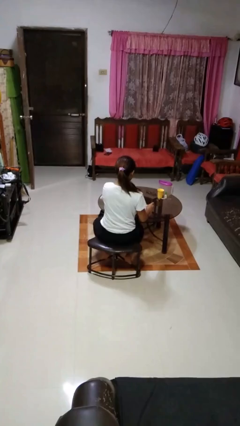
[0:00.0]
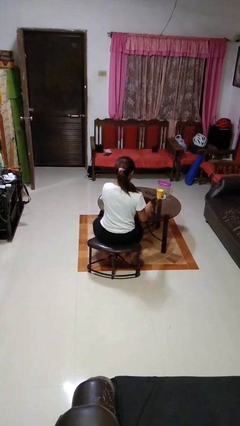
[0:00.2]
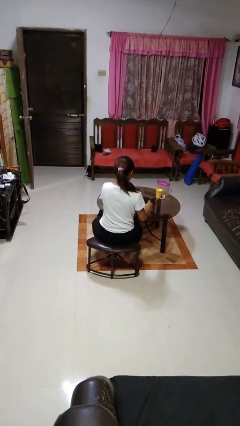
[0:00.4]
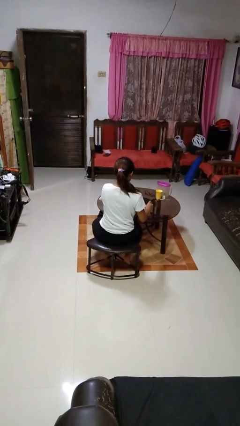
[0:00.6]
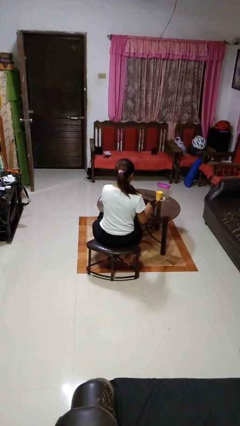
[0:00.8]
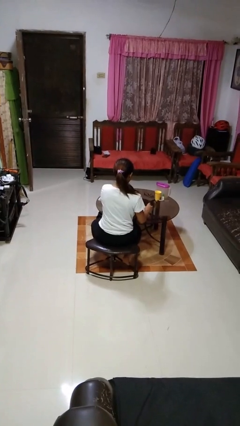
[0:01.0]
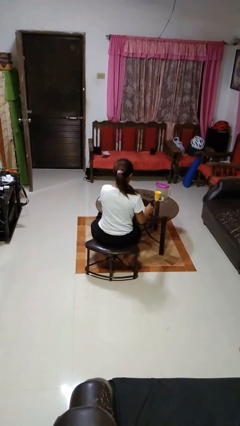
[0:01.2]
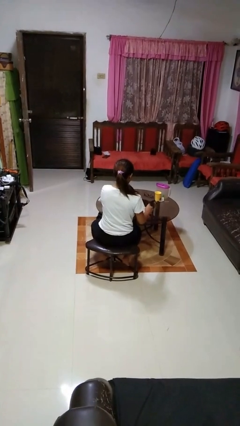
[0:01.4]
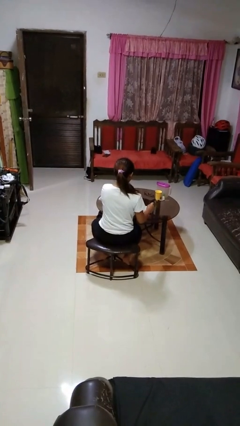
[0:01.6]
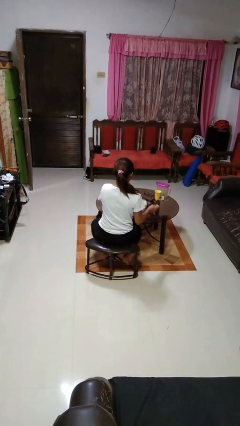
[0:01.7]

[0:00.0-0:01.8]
person stirs mug

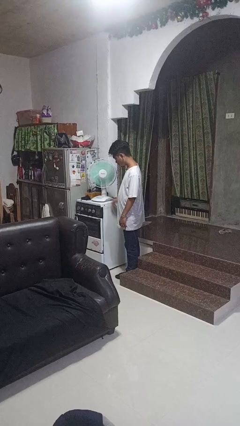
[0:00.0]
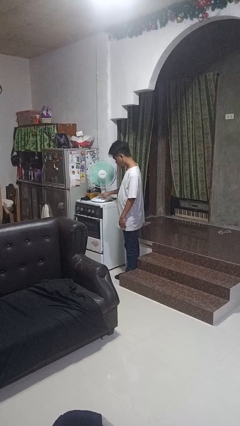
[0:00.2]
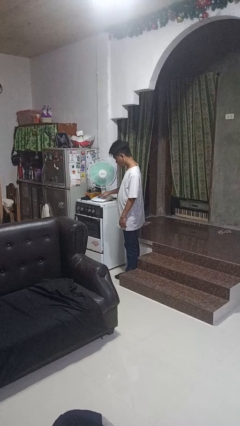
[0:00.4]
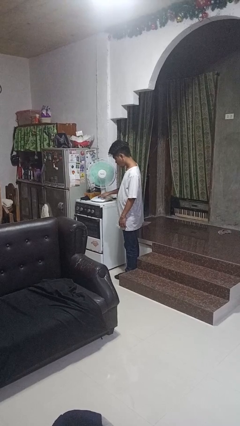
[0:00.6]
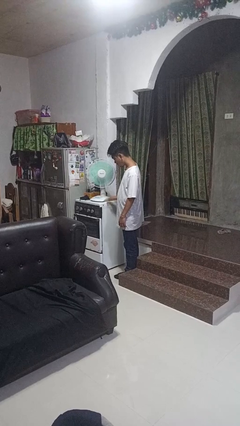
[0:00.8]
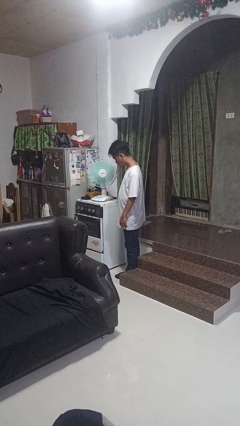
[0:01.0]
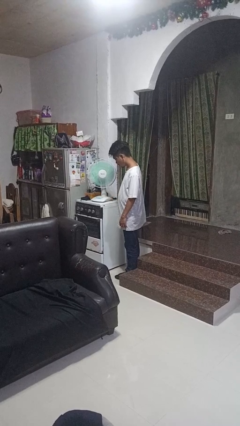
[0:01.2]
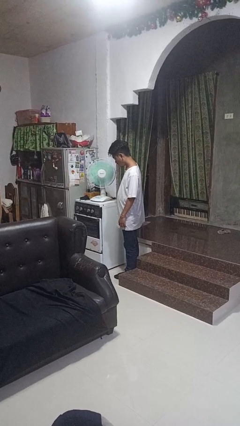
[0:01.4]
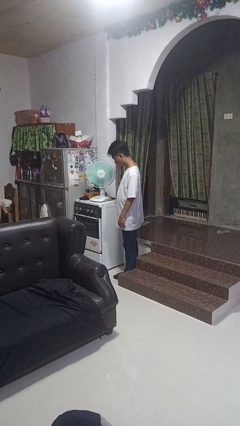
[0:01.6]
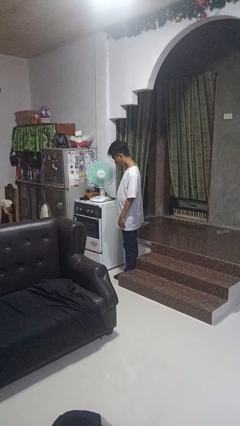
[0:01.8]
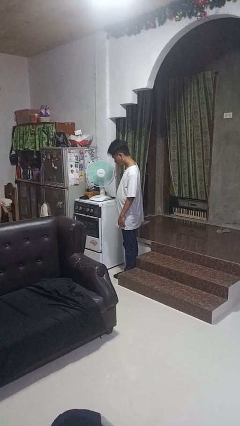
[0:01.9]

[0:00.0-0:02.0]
person turns on fan

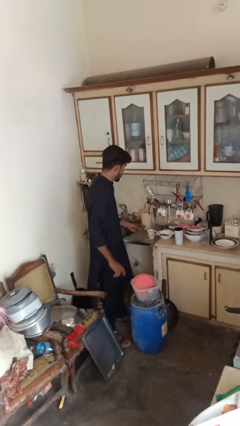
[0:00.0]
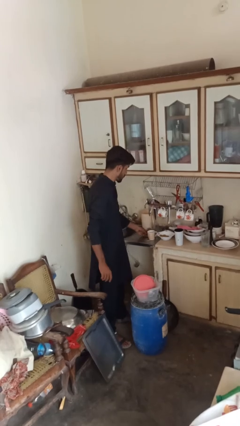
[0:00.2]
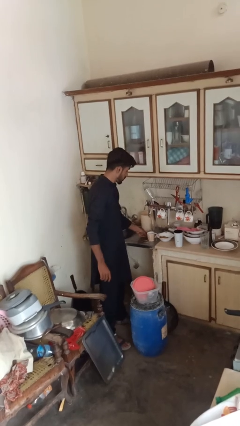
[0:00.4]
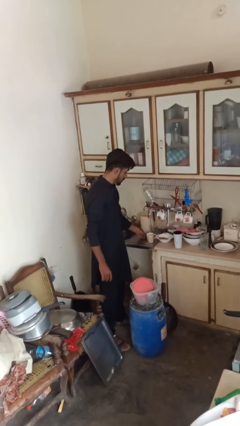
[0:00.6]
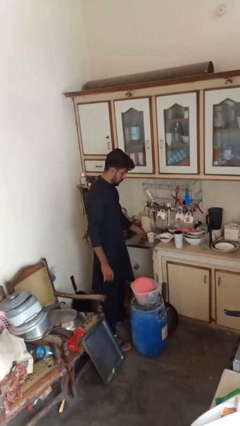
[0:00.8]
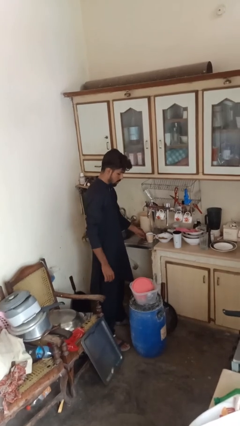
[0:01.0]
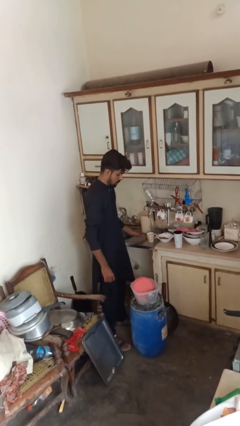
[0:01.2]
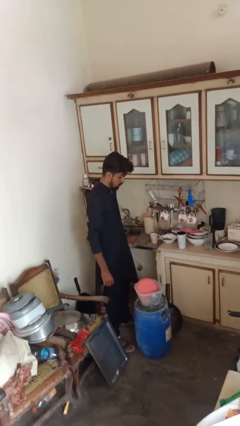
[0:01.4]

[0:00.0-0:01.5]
person unloads dishwasher

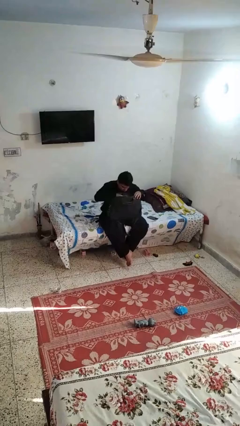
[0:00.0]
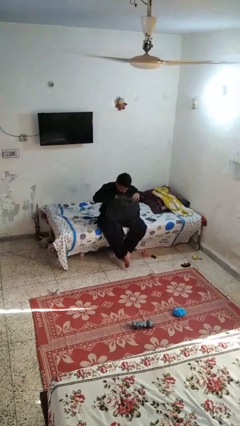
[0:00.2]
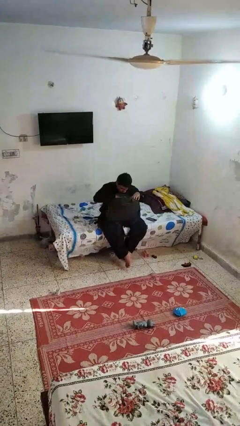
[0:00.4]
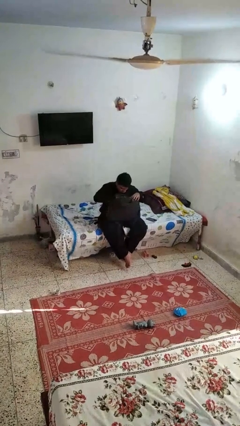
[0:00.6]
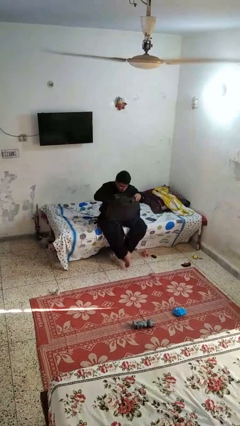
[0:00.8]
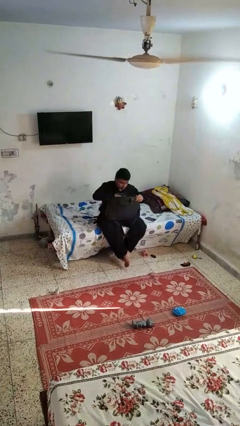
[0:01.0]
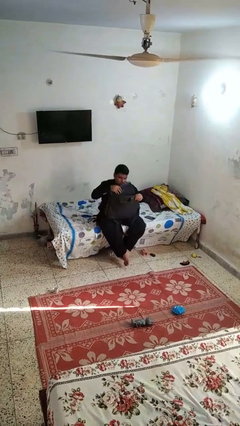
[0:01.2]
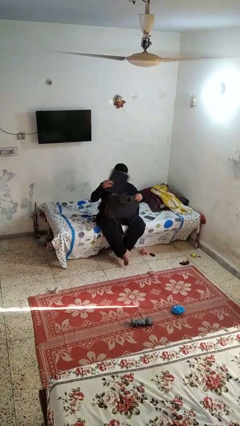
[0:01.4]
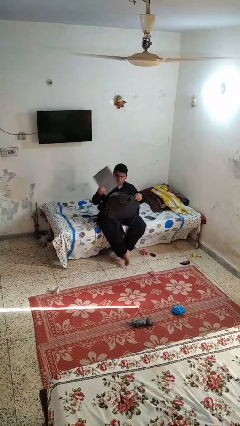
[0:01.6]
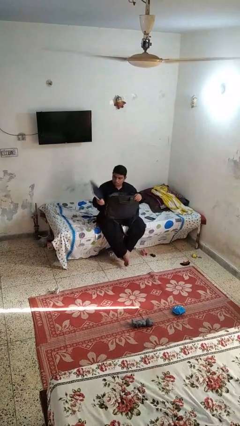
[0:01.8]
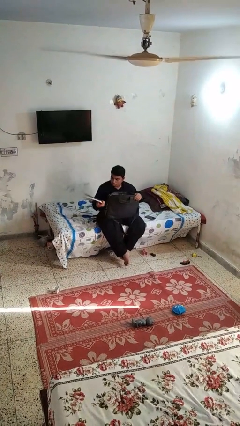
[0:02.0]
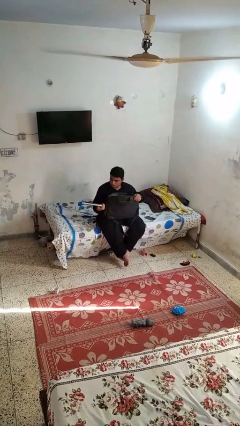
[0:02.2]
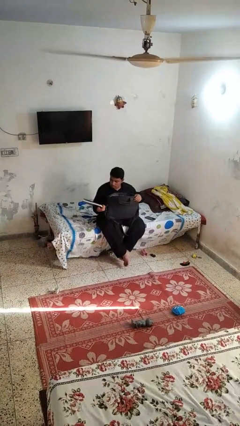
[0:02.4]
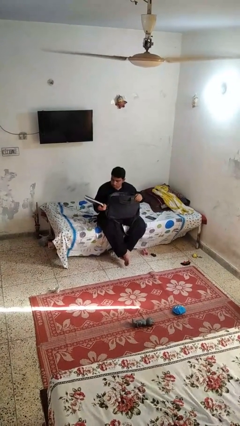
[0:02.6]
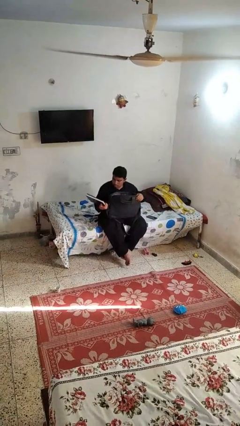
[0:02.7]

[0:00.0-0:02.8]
person takes object from backpack

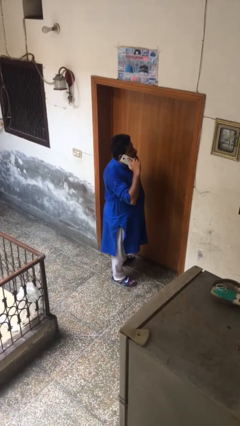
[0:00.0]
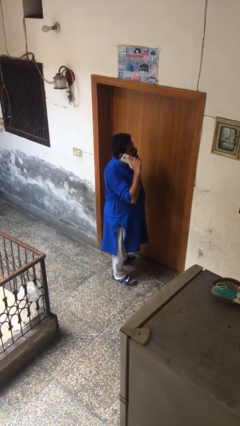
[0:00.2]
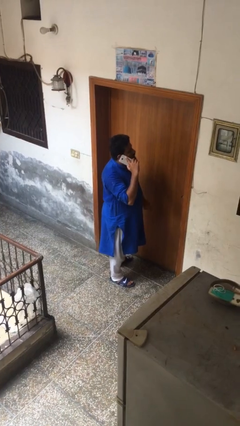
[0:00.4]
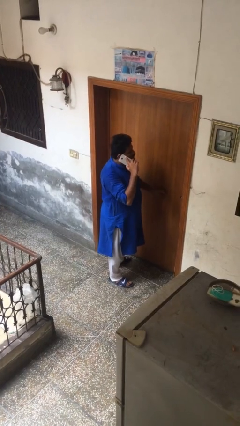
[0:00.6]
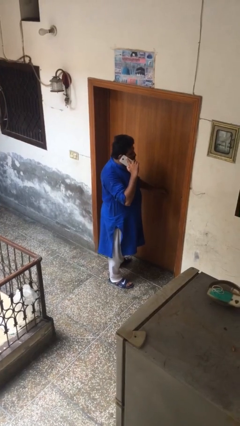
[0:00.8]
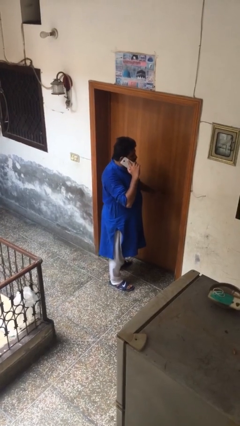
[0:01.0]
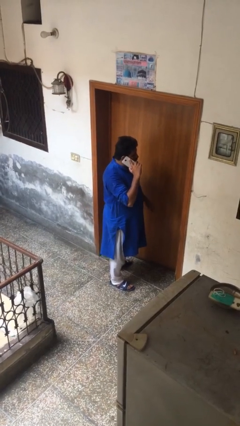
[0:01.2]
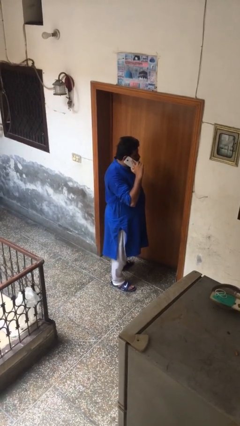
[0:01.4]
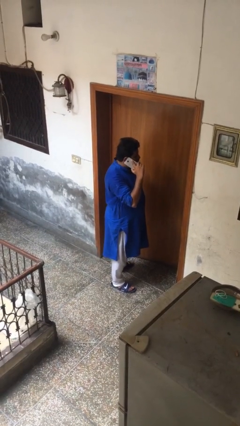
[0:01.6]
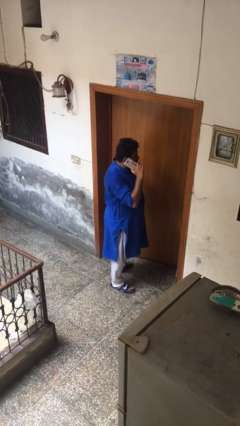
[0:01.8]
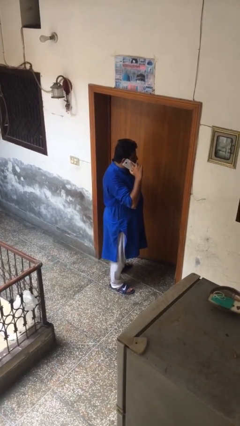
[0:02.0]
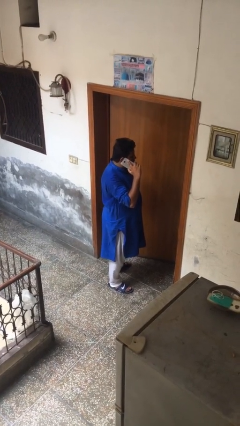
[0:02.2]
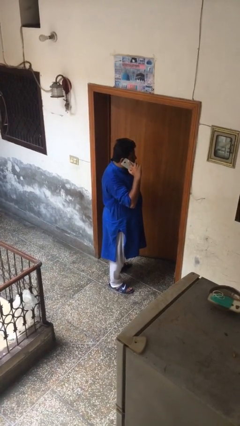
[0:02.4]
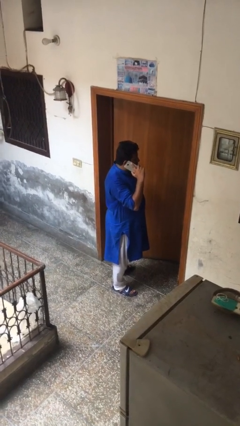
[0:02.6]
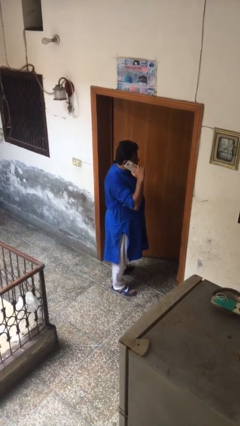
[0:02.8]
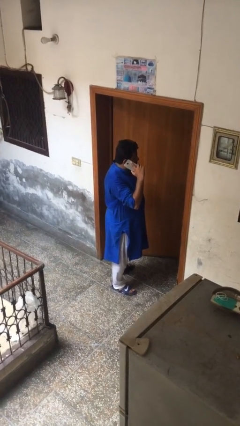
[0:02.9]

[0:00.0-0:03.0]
person opens facility door

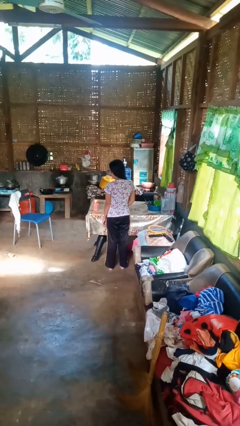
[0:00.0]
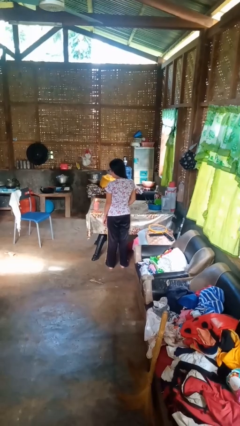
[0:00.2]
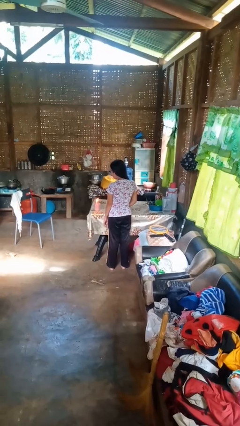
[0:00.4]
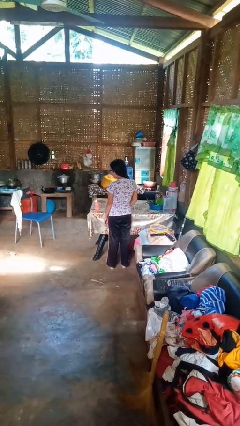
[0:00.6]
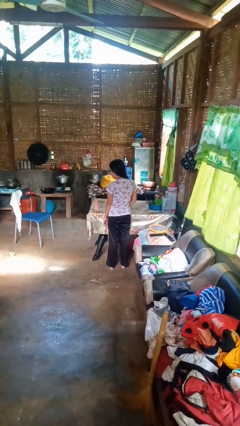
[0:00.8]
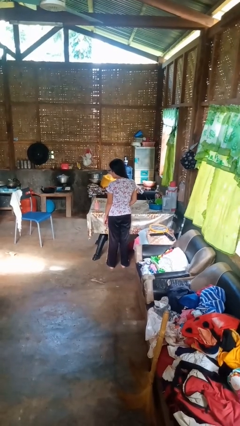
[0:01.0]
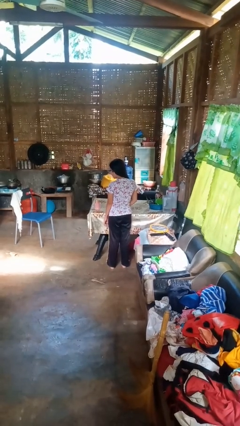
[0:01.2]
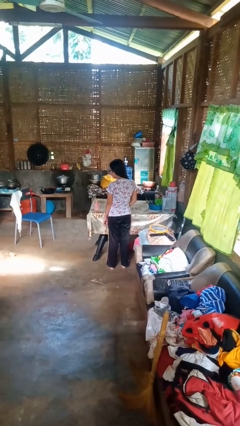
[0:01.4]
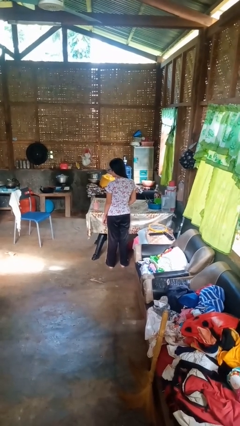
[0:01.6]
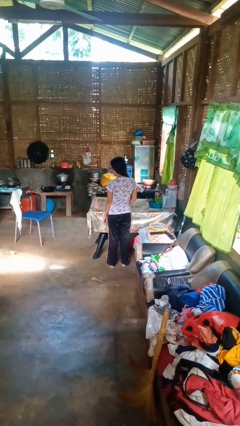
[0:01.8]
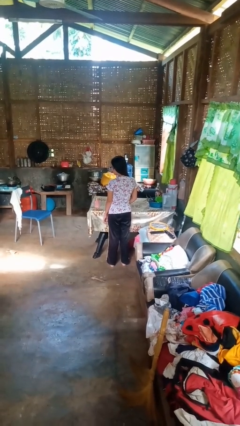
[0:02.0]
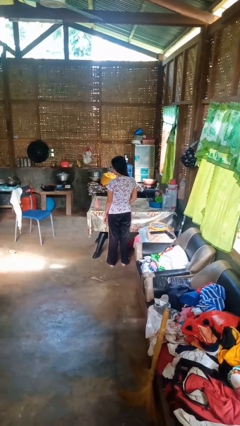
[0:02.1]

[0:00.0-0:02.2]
person extinguishes candle

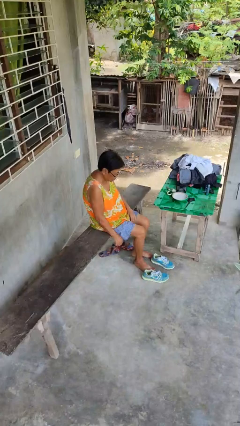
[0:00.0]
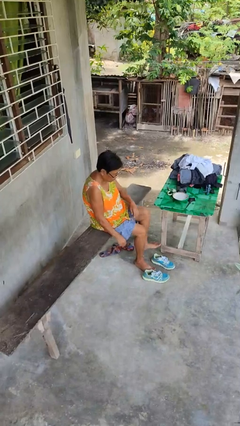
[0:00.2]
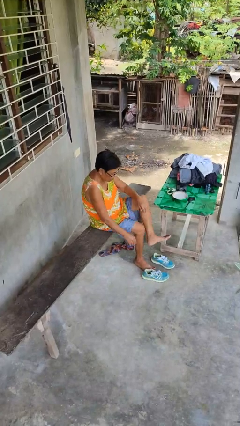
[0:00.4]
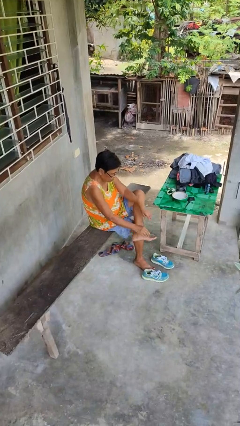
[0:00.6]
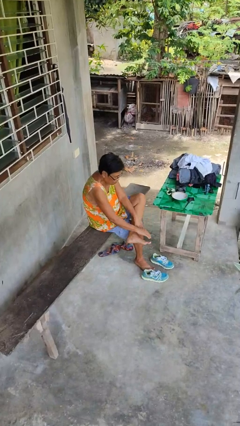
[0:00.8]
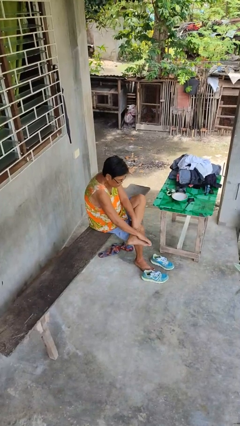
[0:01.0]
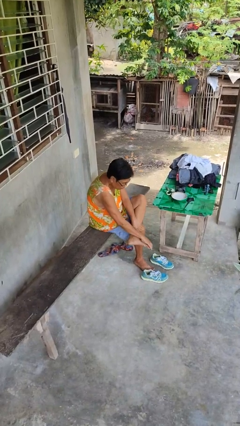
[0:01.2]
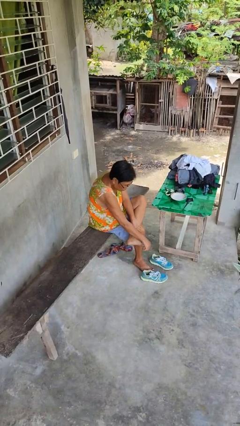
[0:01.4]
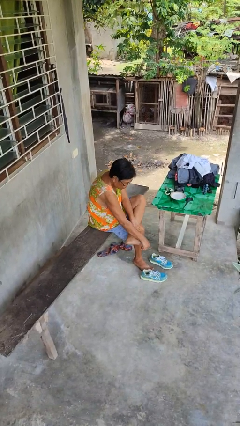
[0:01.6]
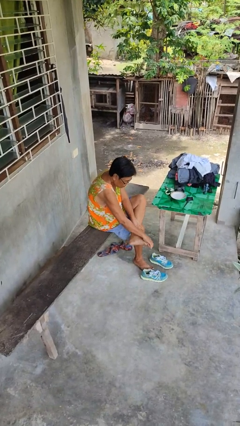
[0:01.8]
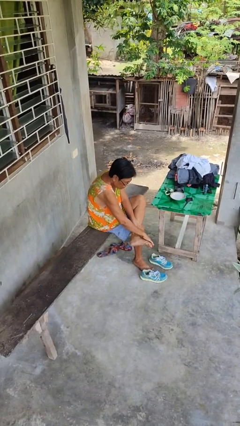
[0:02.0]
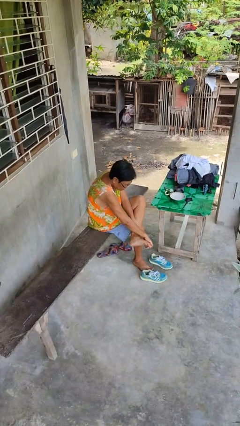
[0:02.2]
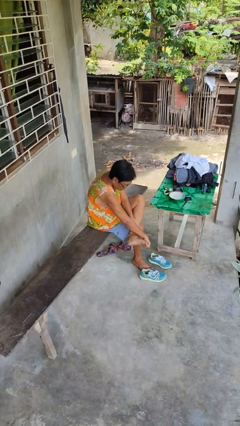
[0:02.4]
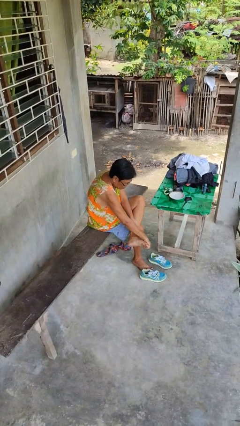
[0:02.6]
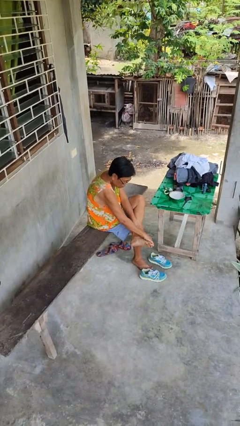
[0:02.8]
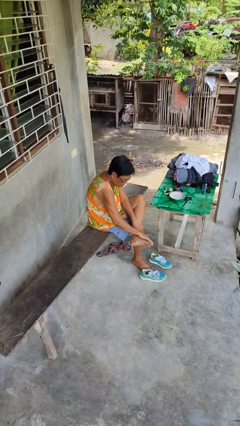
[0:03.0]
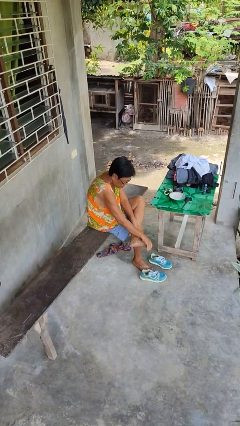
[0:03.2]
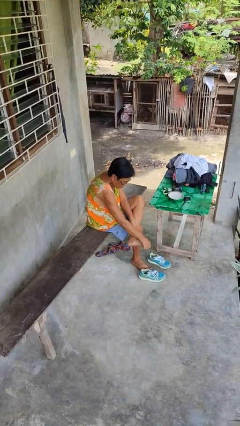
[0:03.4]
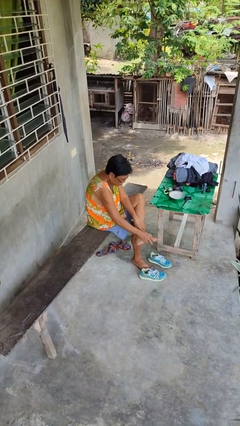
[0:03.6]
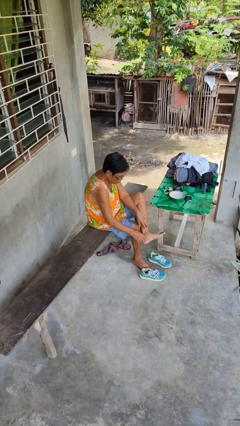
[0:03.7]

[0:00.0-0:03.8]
person rubs foot

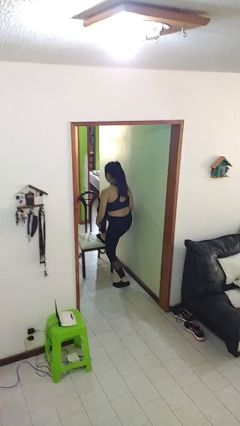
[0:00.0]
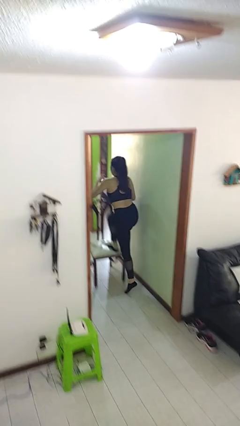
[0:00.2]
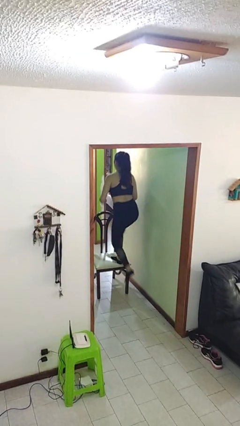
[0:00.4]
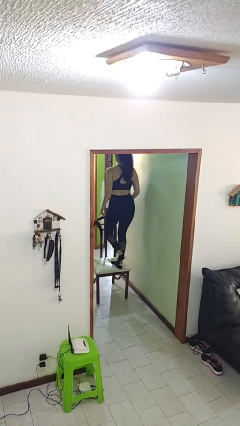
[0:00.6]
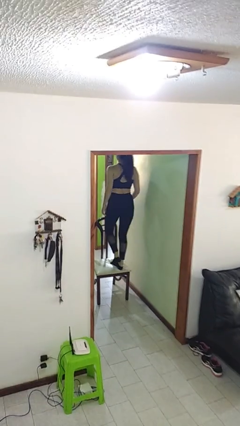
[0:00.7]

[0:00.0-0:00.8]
person climbs on chair
